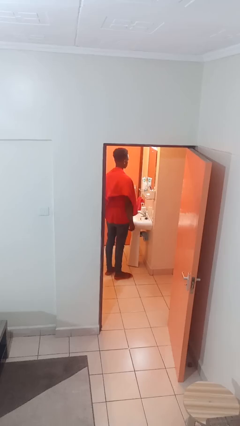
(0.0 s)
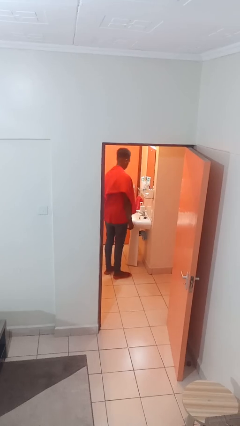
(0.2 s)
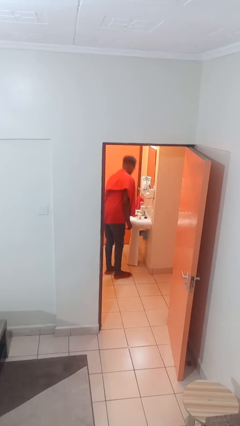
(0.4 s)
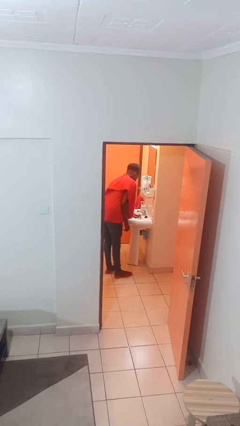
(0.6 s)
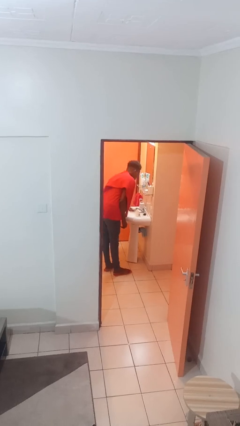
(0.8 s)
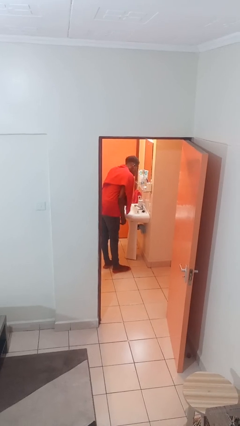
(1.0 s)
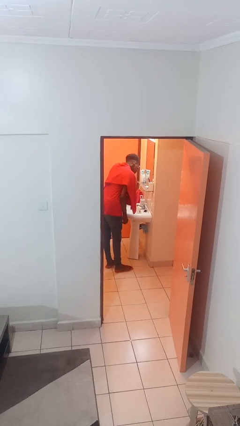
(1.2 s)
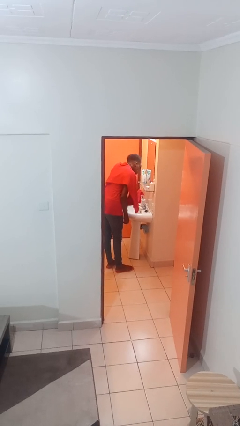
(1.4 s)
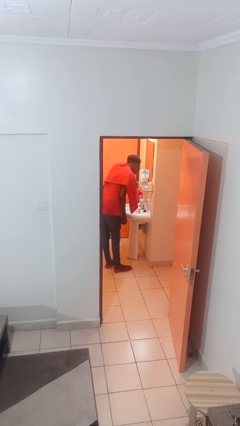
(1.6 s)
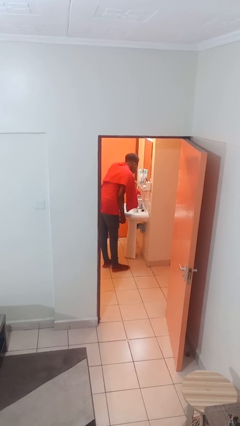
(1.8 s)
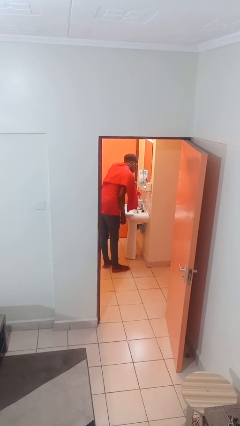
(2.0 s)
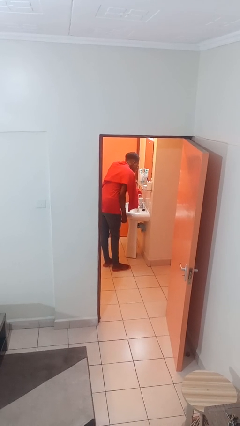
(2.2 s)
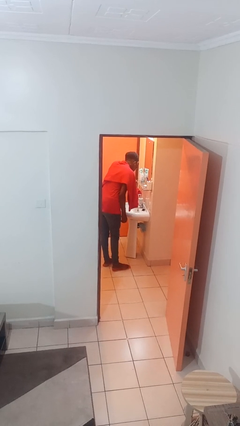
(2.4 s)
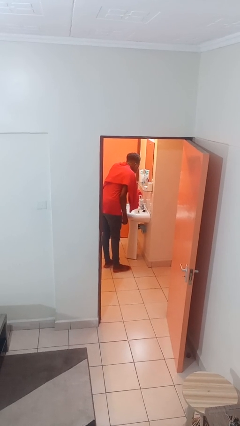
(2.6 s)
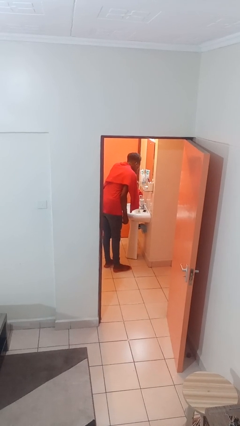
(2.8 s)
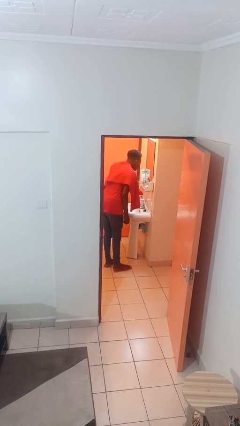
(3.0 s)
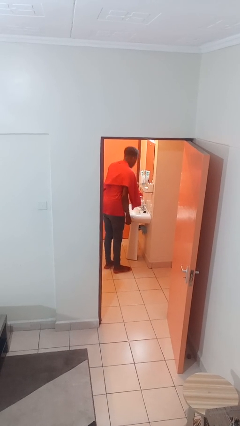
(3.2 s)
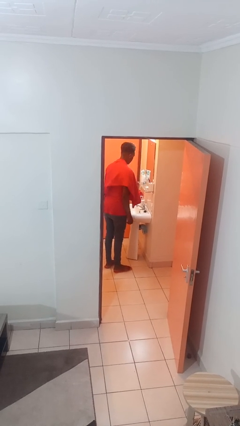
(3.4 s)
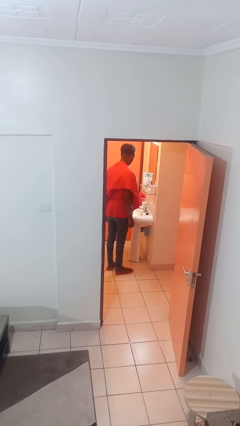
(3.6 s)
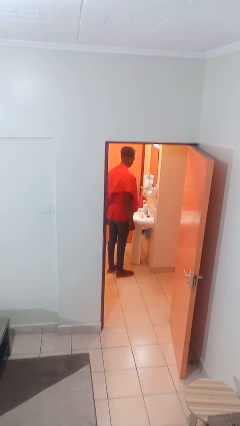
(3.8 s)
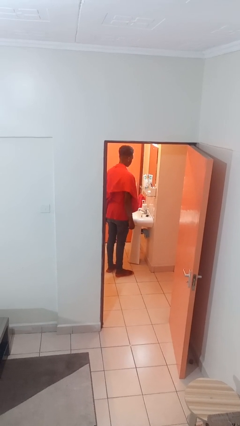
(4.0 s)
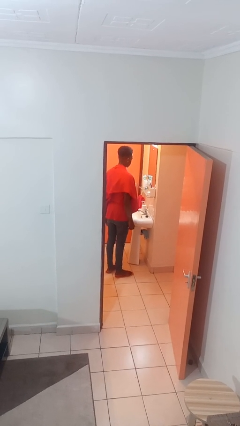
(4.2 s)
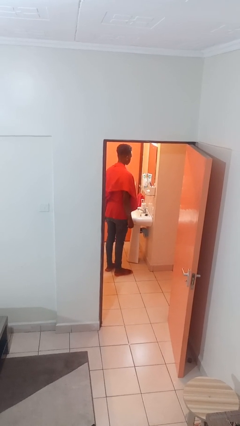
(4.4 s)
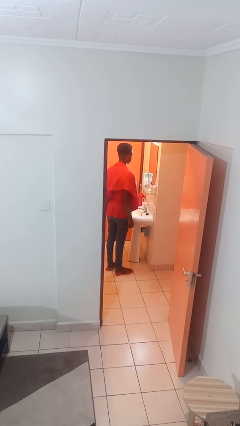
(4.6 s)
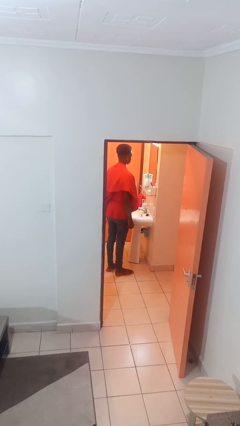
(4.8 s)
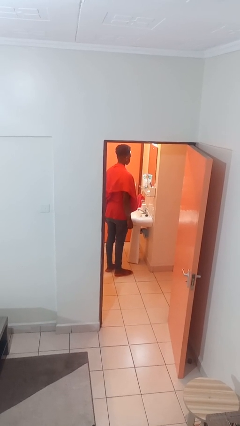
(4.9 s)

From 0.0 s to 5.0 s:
person washes face

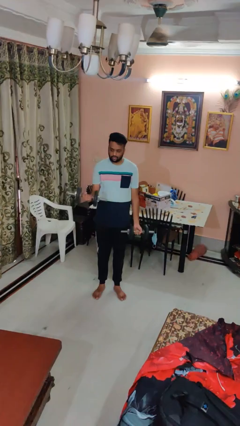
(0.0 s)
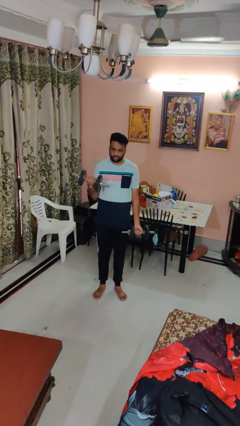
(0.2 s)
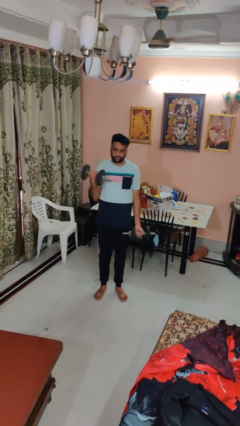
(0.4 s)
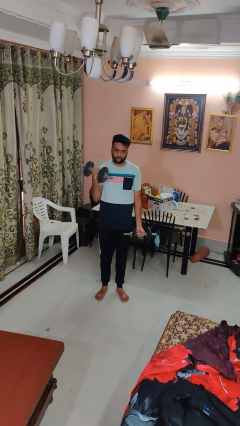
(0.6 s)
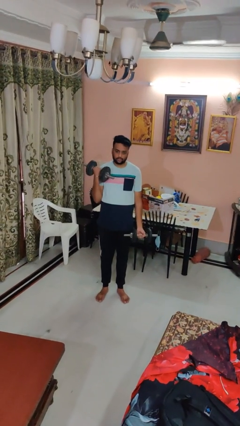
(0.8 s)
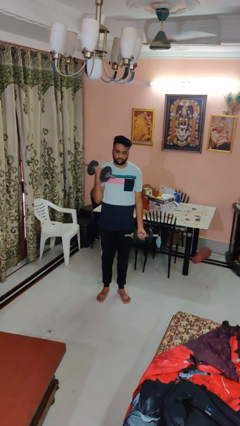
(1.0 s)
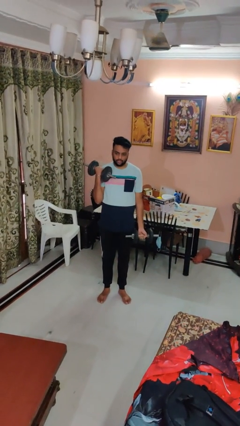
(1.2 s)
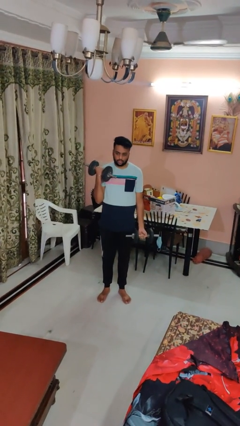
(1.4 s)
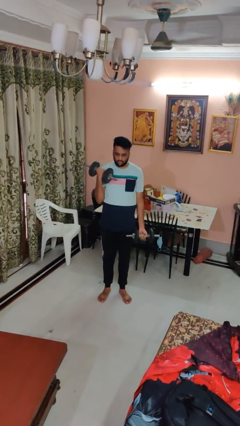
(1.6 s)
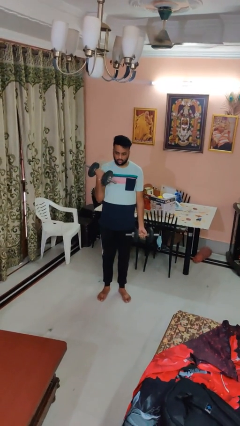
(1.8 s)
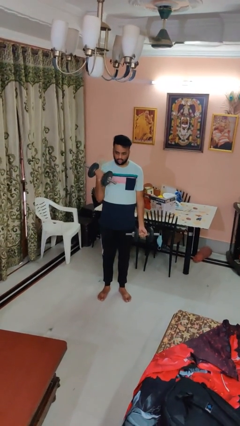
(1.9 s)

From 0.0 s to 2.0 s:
person lifts dumbbells

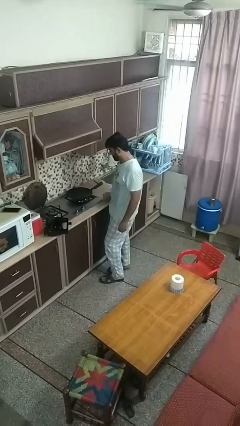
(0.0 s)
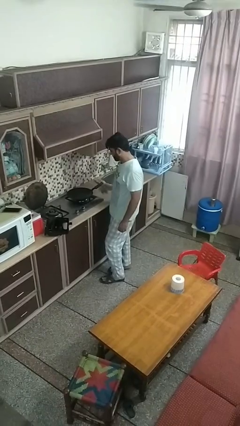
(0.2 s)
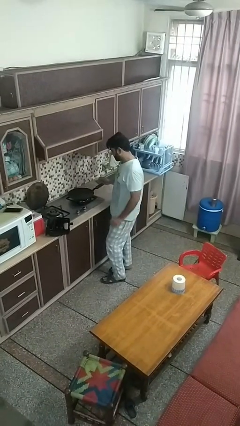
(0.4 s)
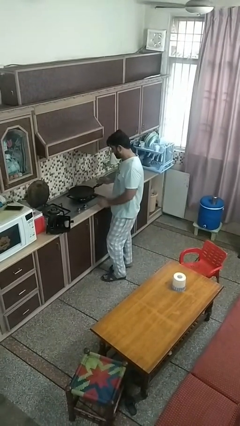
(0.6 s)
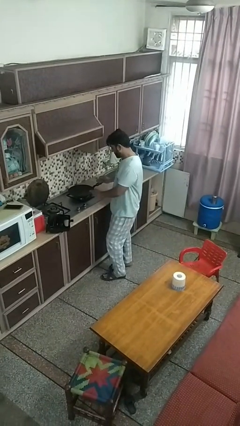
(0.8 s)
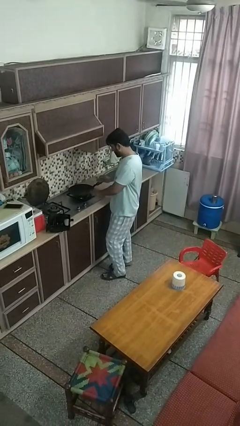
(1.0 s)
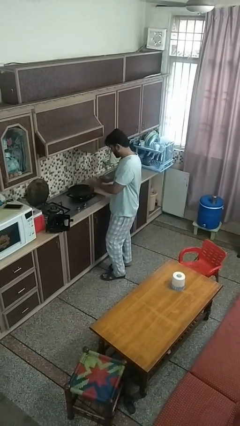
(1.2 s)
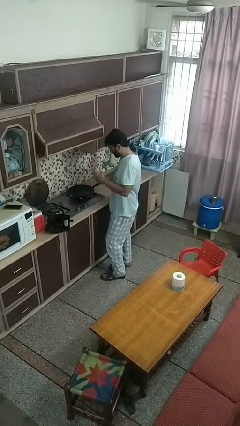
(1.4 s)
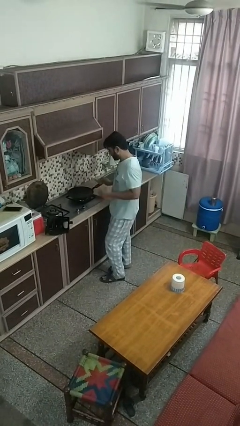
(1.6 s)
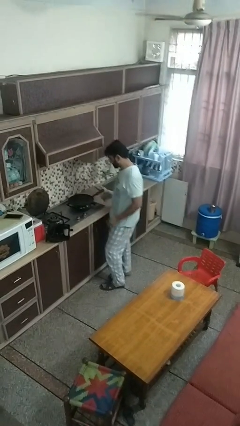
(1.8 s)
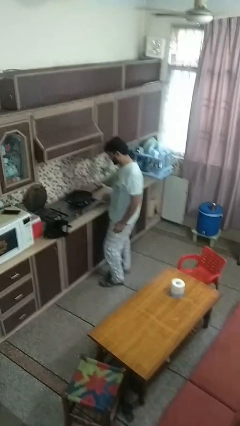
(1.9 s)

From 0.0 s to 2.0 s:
person burns hand

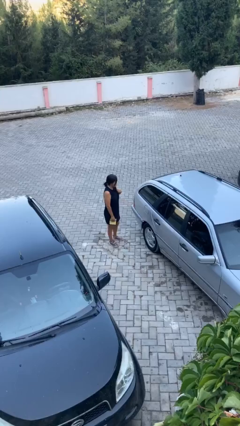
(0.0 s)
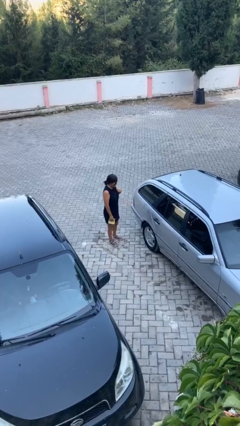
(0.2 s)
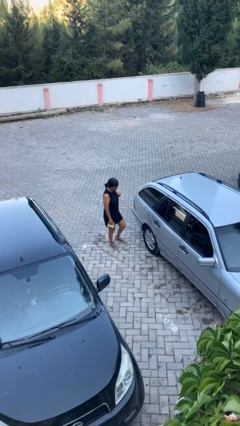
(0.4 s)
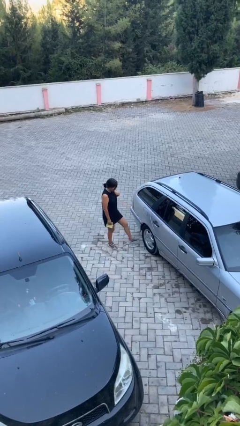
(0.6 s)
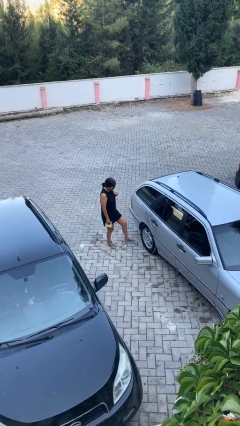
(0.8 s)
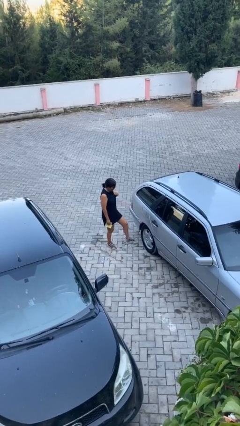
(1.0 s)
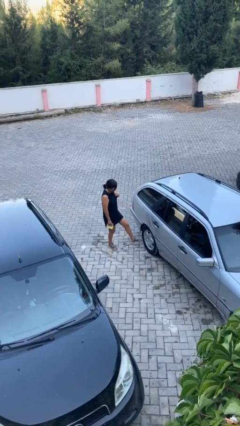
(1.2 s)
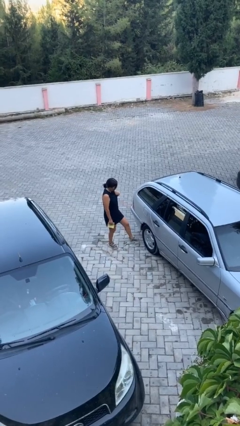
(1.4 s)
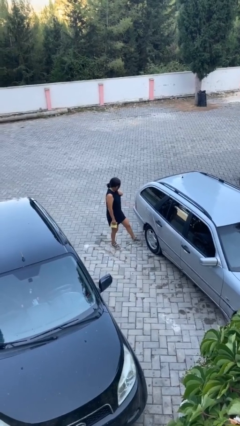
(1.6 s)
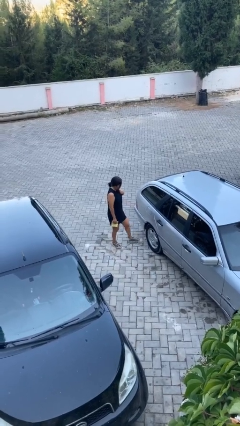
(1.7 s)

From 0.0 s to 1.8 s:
person kicks car tires

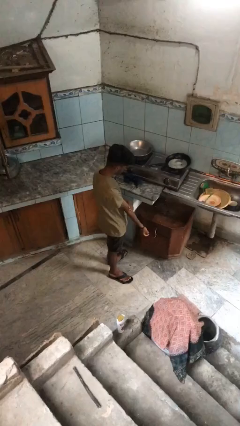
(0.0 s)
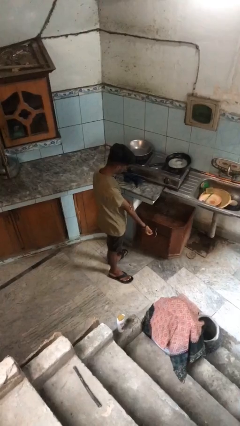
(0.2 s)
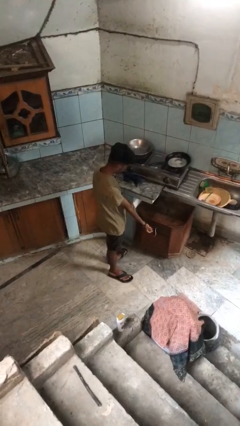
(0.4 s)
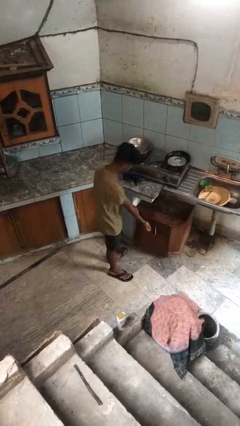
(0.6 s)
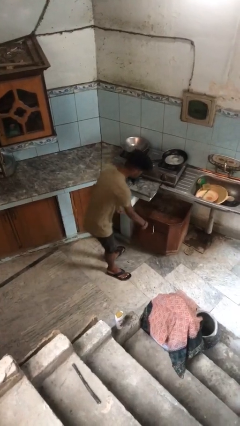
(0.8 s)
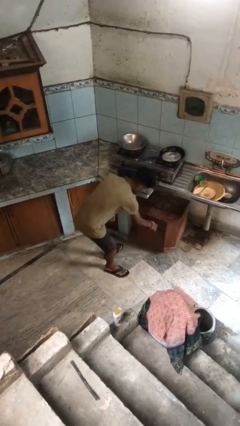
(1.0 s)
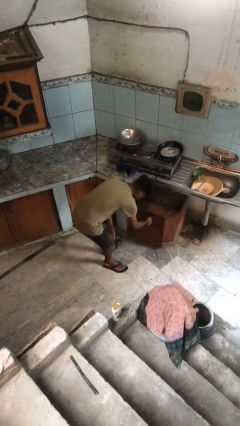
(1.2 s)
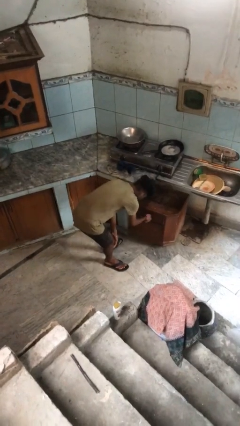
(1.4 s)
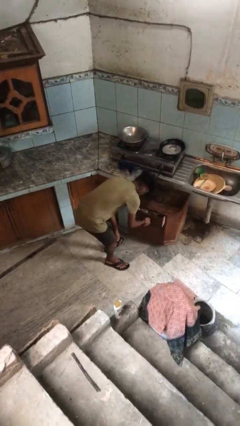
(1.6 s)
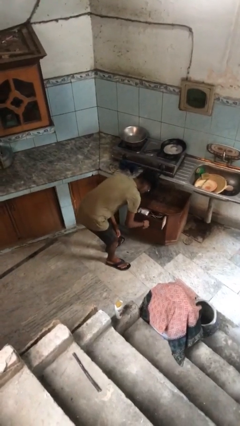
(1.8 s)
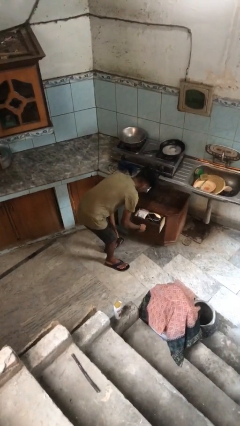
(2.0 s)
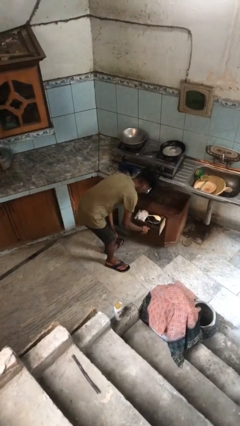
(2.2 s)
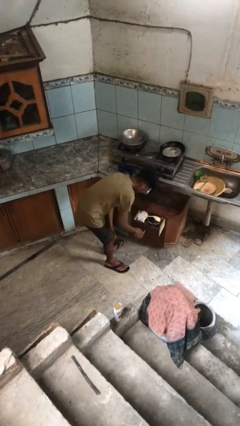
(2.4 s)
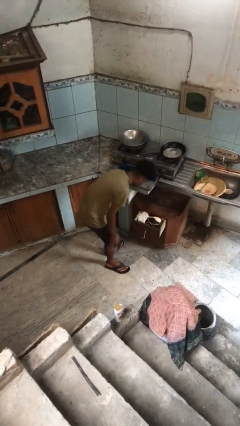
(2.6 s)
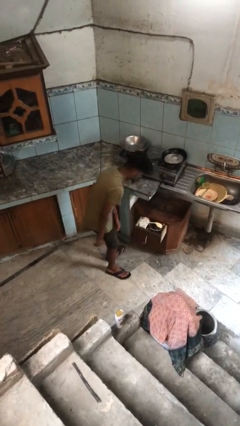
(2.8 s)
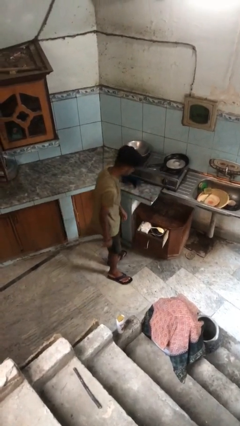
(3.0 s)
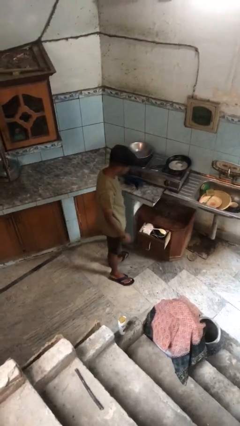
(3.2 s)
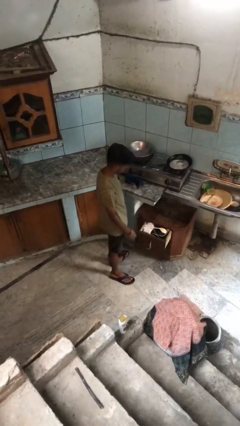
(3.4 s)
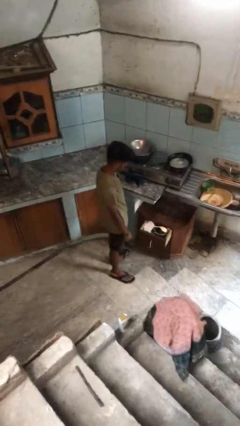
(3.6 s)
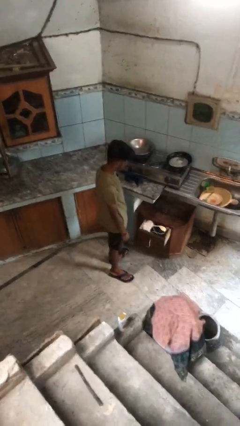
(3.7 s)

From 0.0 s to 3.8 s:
person opens kitchen drawer

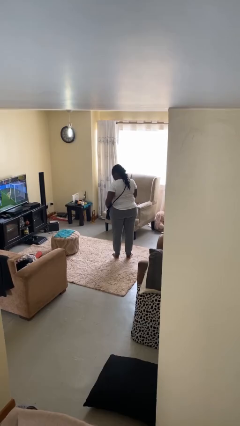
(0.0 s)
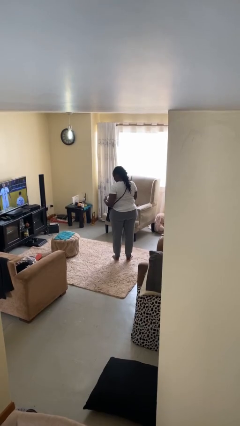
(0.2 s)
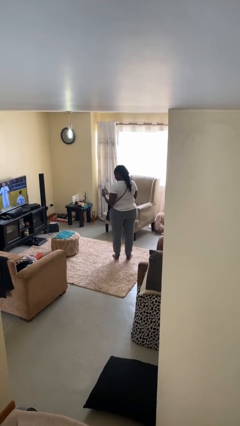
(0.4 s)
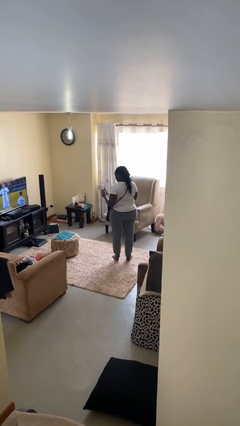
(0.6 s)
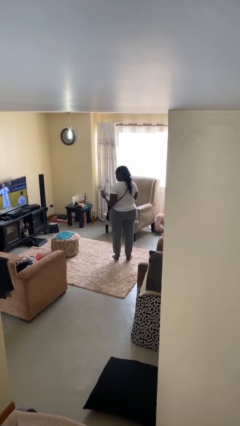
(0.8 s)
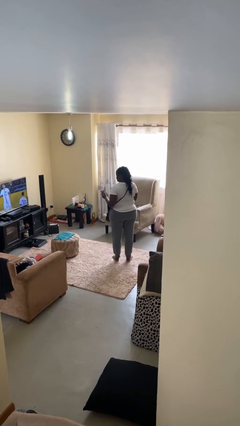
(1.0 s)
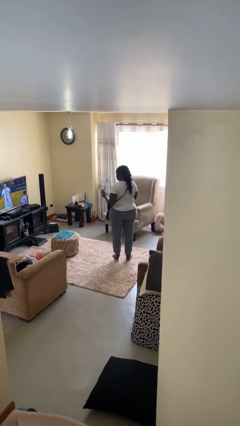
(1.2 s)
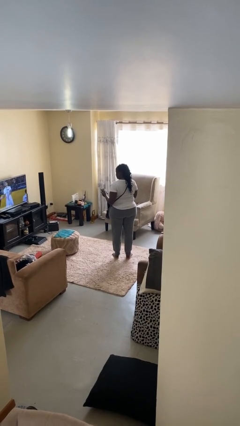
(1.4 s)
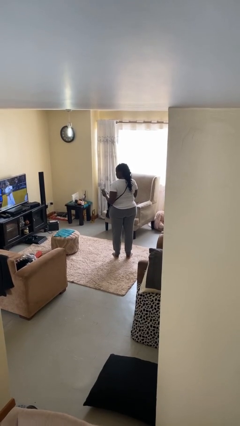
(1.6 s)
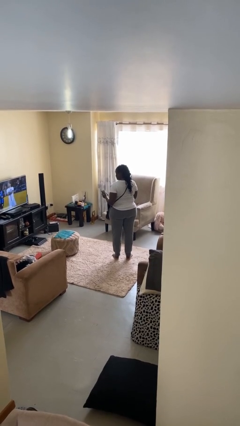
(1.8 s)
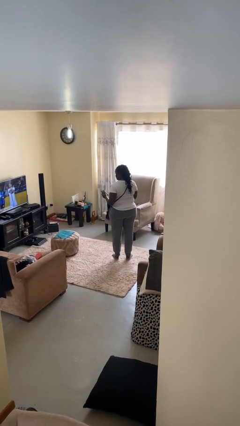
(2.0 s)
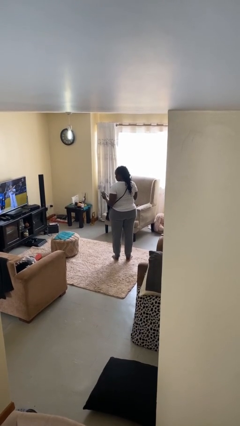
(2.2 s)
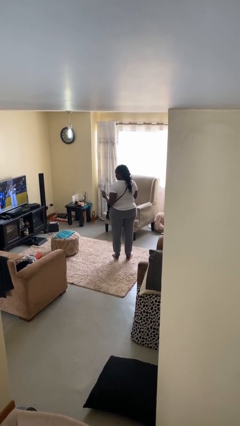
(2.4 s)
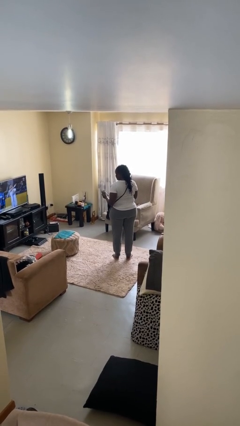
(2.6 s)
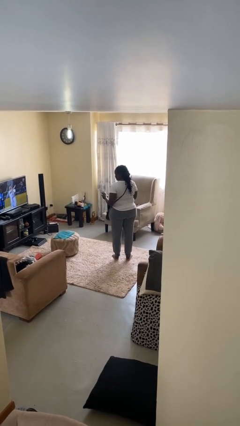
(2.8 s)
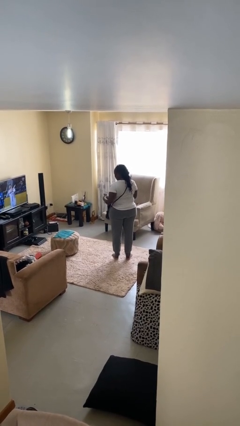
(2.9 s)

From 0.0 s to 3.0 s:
person takes object from purse
